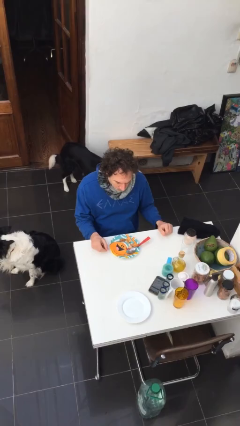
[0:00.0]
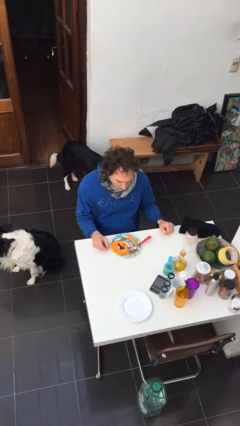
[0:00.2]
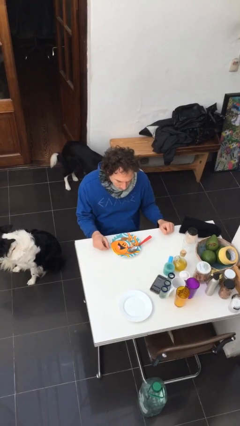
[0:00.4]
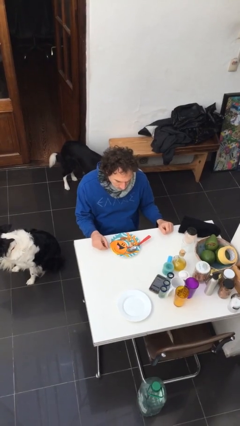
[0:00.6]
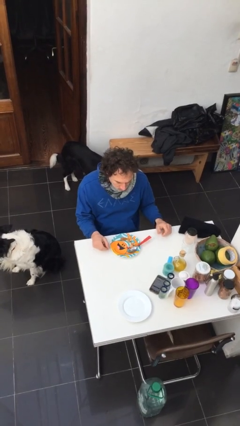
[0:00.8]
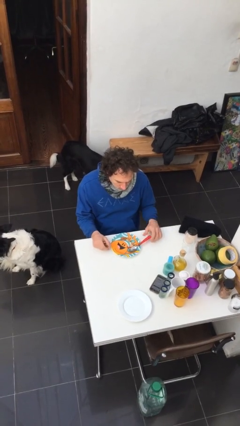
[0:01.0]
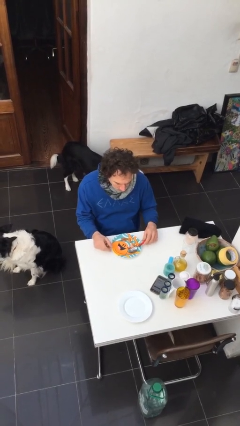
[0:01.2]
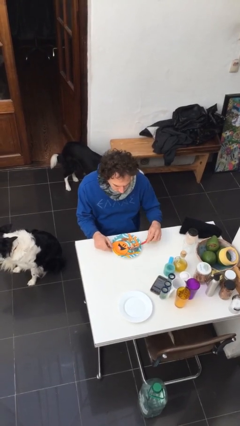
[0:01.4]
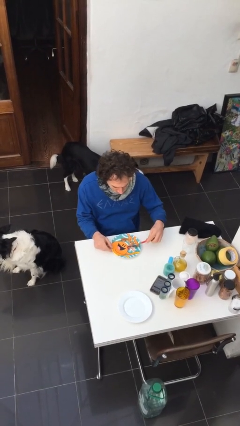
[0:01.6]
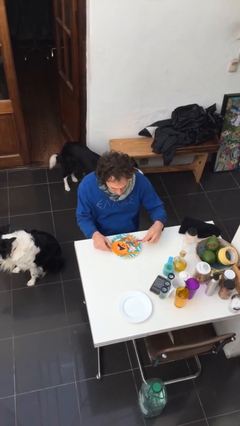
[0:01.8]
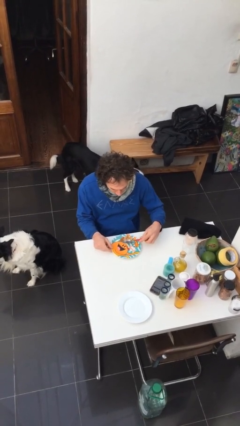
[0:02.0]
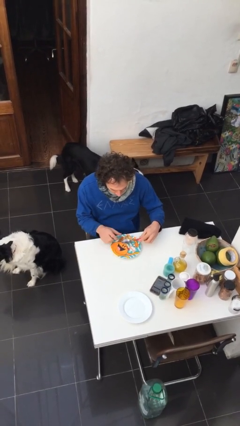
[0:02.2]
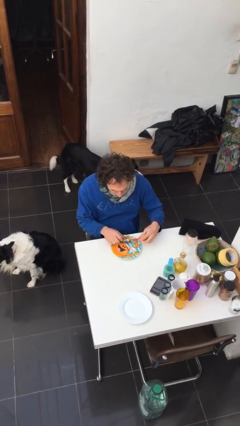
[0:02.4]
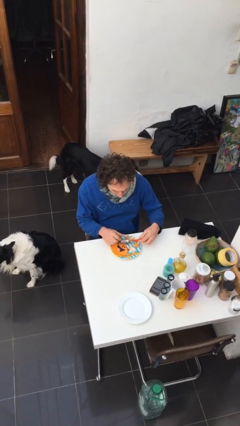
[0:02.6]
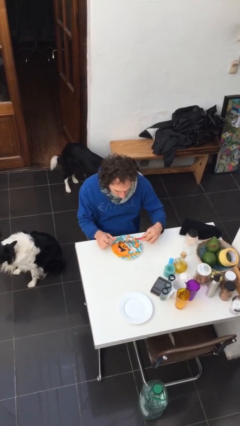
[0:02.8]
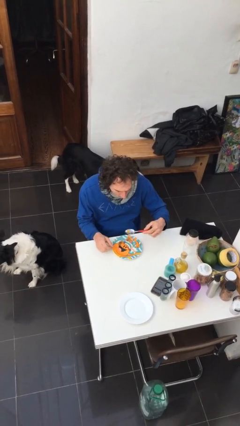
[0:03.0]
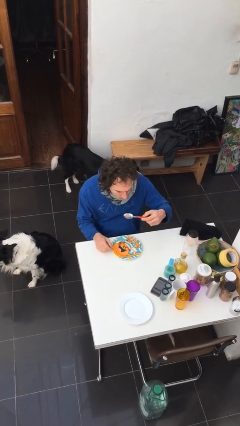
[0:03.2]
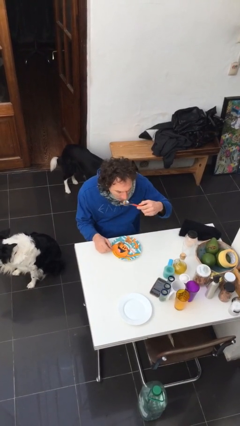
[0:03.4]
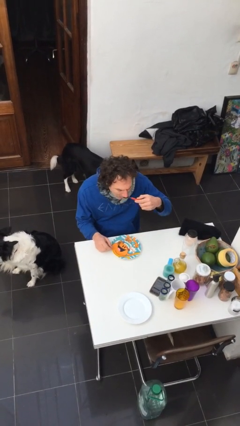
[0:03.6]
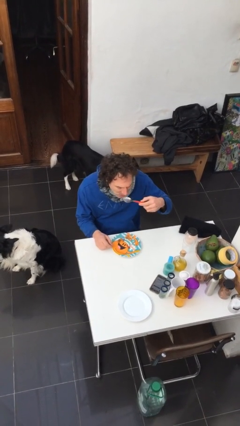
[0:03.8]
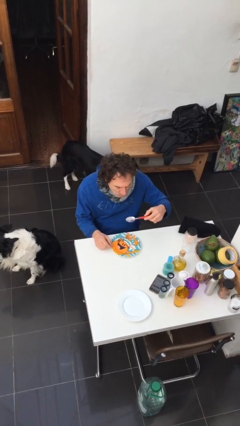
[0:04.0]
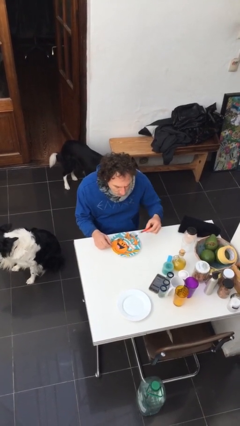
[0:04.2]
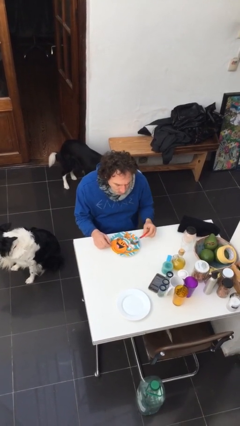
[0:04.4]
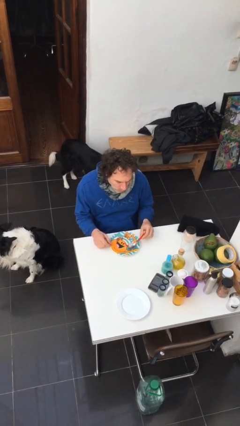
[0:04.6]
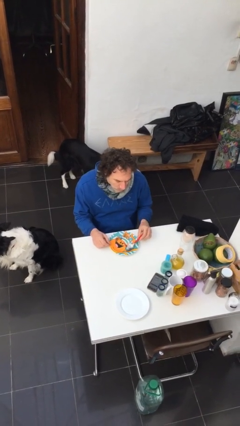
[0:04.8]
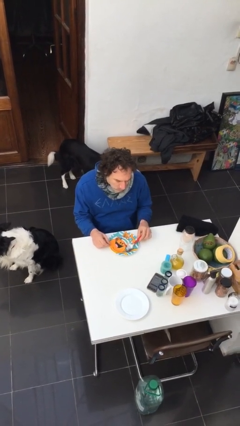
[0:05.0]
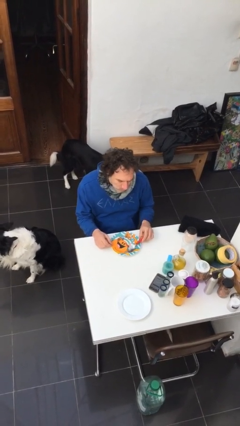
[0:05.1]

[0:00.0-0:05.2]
person eats with utensil

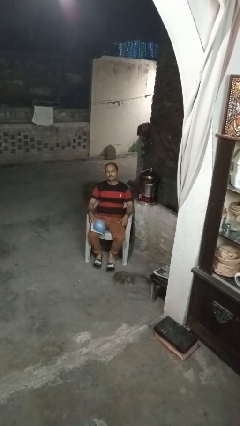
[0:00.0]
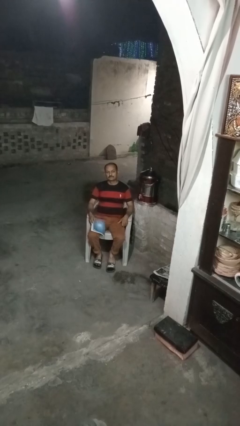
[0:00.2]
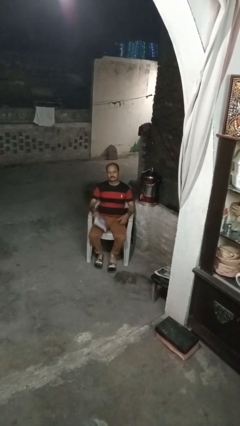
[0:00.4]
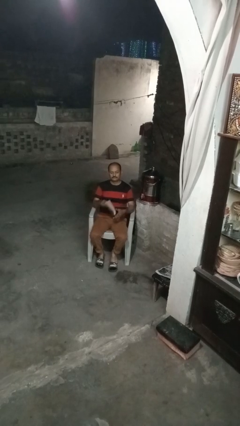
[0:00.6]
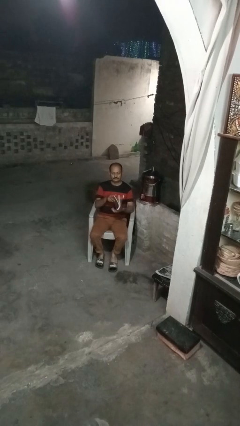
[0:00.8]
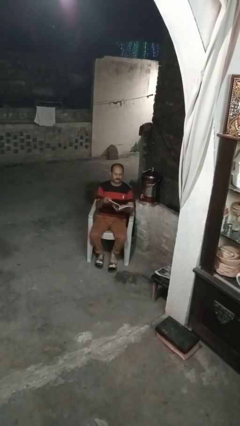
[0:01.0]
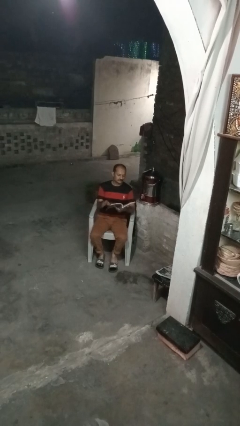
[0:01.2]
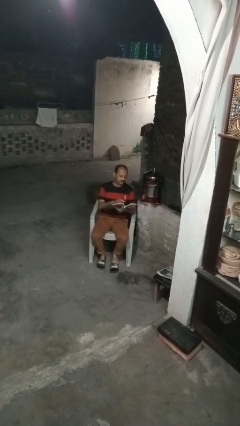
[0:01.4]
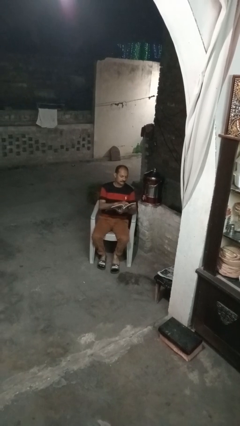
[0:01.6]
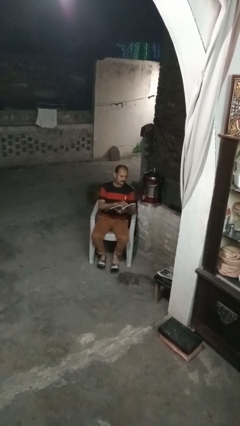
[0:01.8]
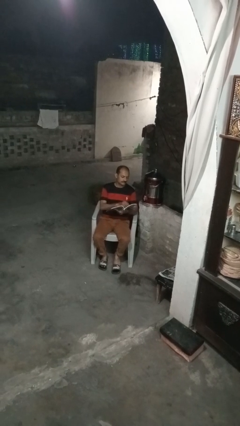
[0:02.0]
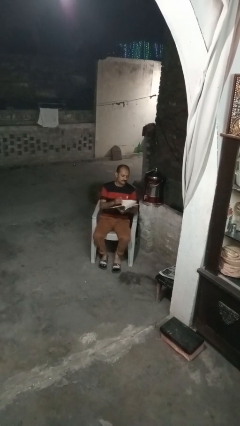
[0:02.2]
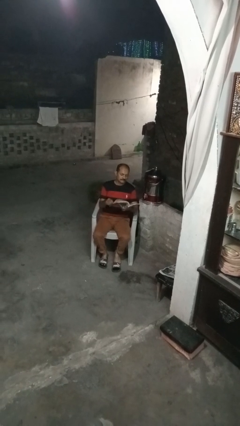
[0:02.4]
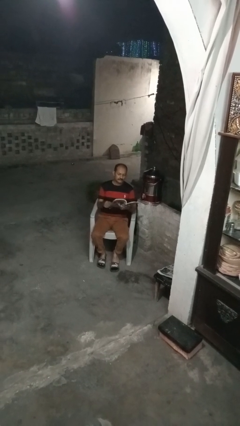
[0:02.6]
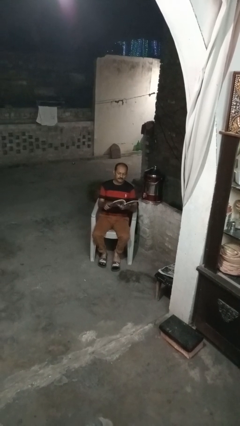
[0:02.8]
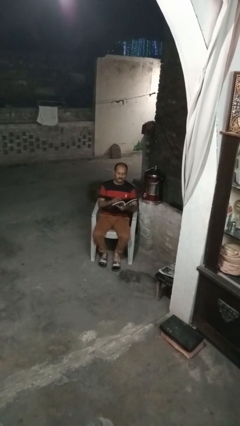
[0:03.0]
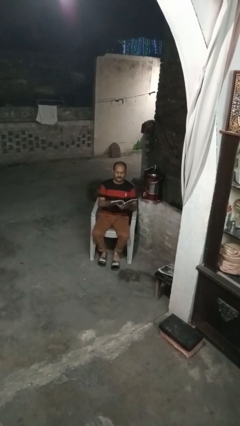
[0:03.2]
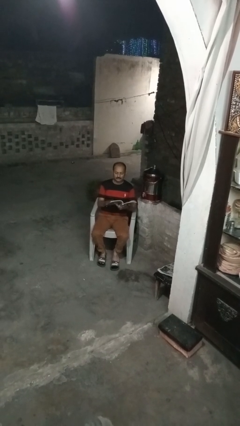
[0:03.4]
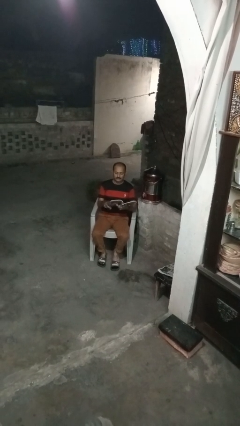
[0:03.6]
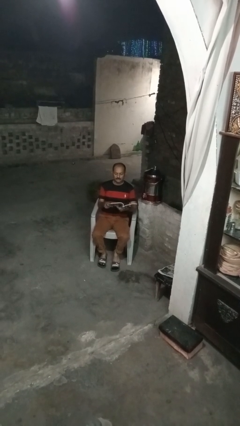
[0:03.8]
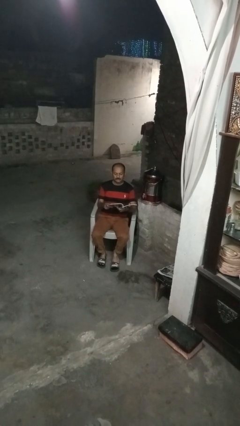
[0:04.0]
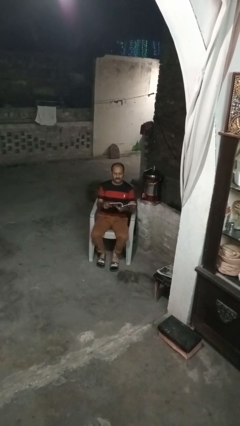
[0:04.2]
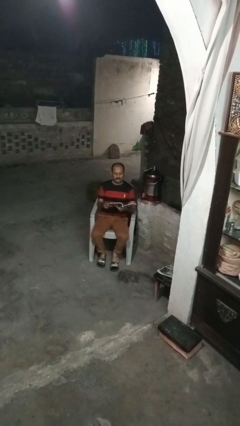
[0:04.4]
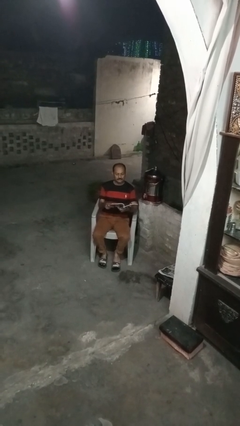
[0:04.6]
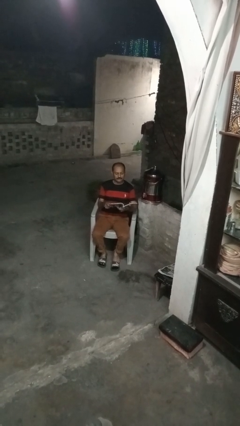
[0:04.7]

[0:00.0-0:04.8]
person reads book

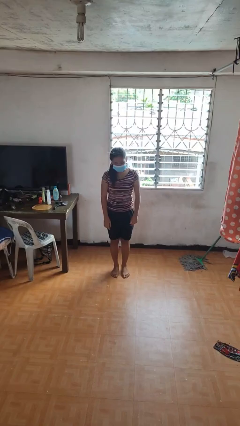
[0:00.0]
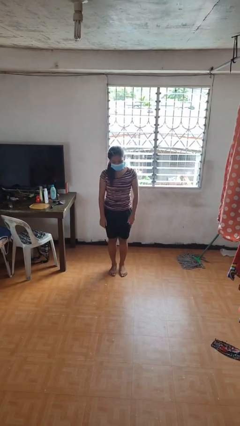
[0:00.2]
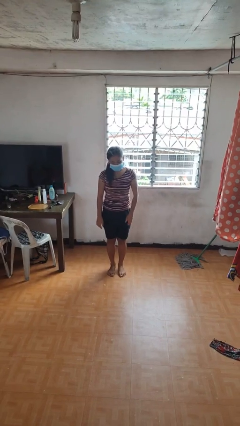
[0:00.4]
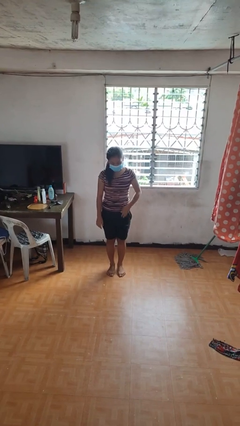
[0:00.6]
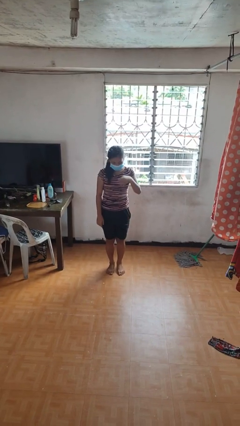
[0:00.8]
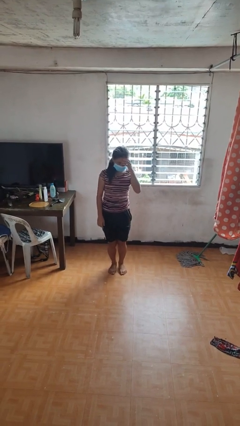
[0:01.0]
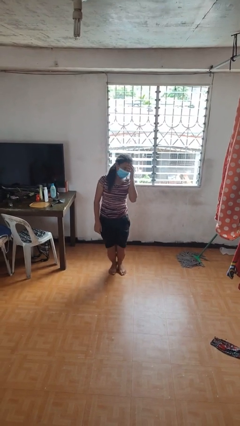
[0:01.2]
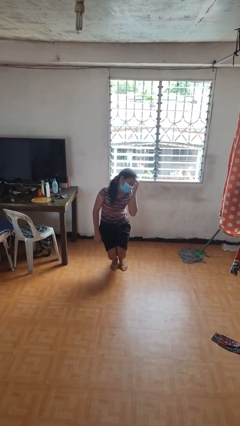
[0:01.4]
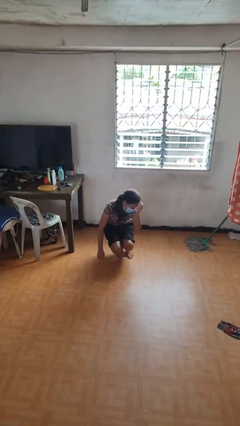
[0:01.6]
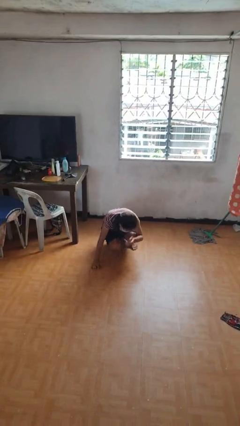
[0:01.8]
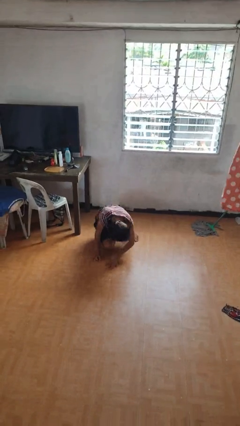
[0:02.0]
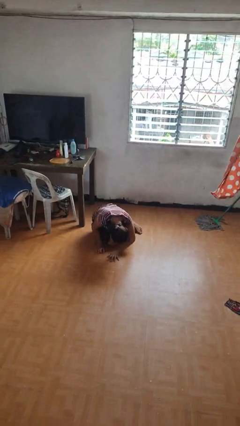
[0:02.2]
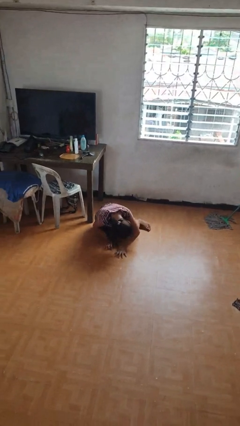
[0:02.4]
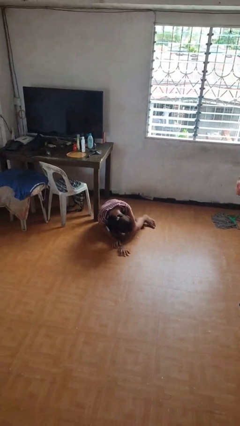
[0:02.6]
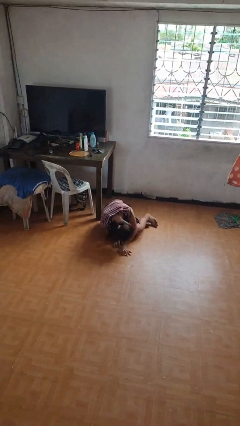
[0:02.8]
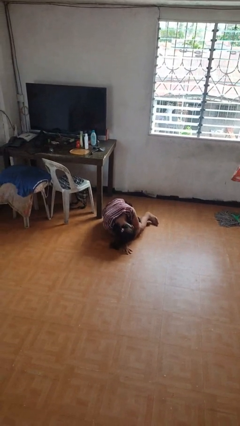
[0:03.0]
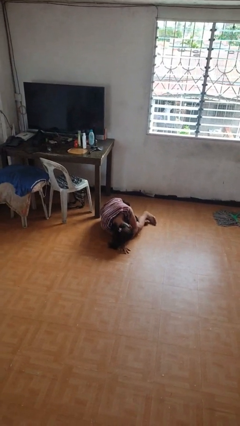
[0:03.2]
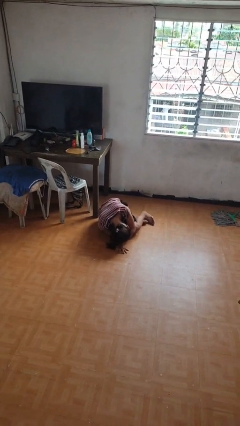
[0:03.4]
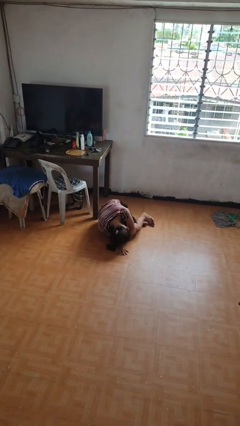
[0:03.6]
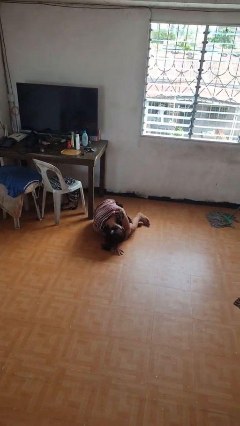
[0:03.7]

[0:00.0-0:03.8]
person falls while standing

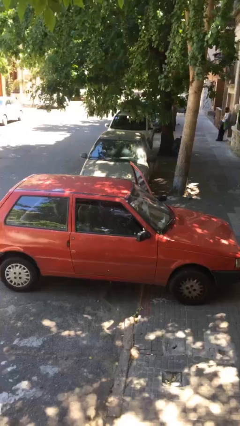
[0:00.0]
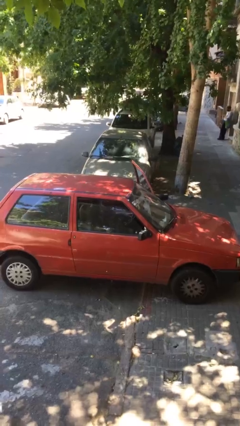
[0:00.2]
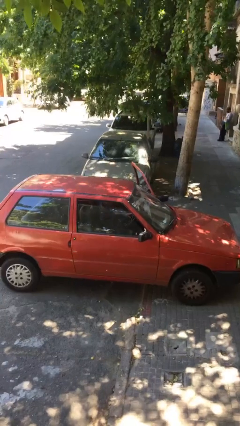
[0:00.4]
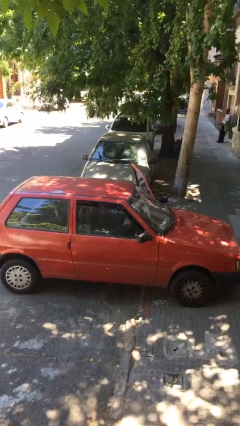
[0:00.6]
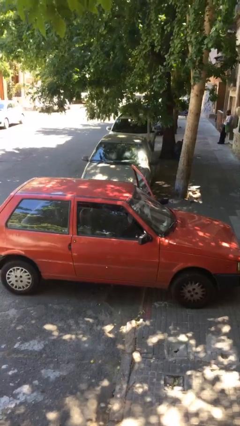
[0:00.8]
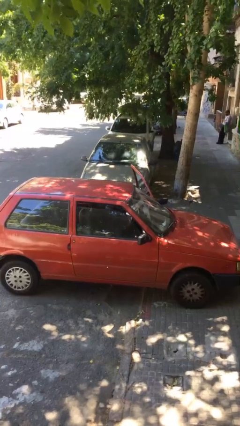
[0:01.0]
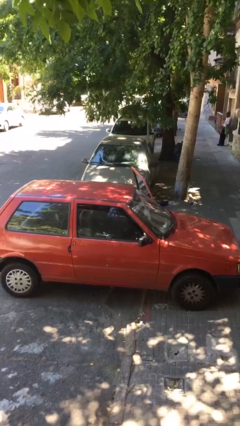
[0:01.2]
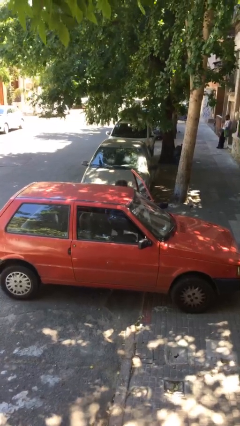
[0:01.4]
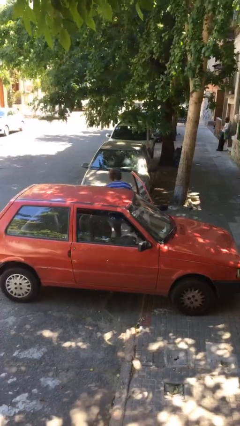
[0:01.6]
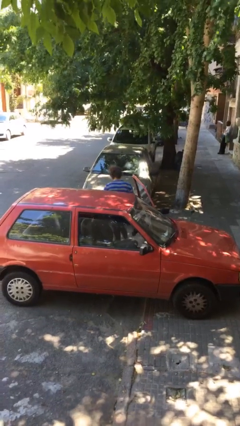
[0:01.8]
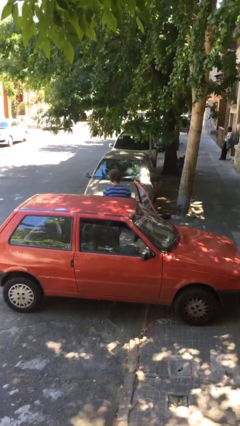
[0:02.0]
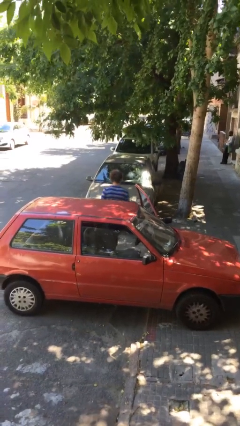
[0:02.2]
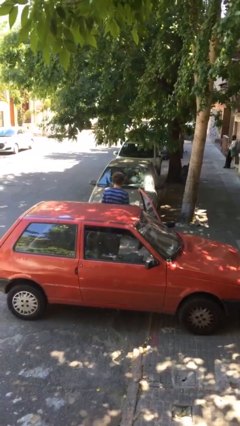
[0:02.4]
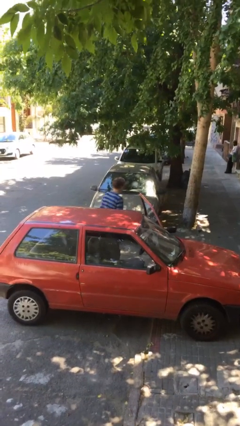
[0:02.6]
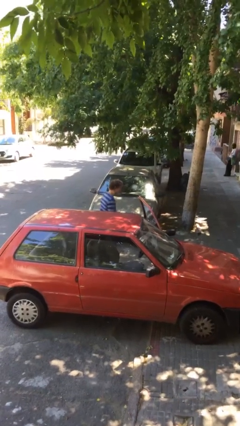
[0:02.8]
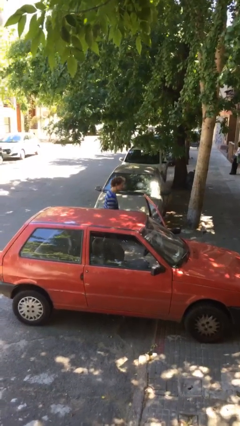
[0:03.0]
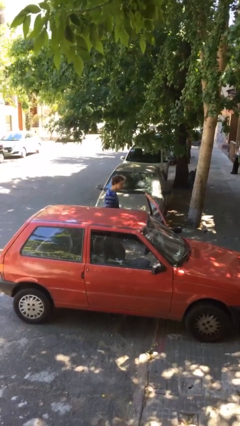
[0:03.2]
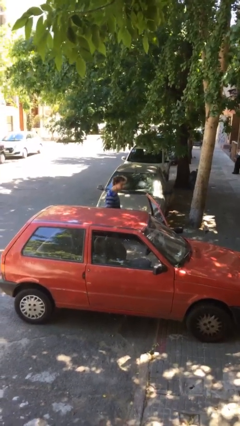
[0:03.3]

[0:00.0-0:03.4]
person exits car

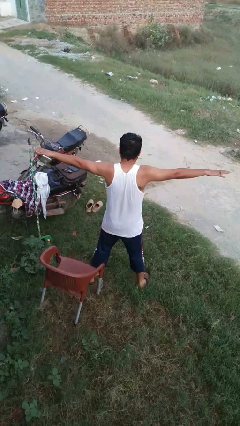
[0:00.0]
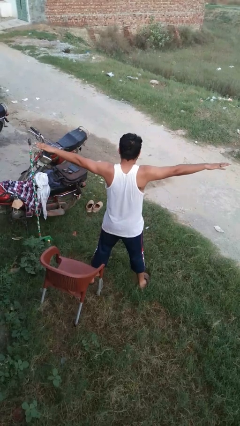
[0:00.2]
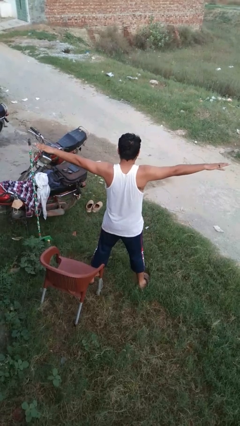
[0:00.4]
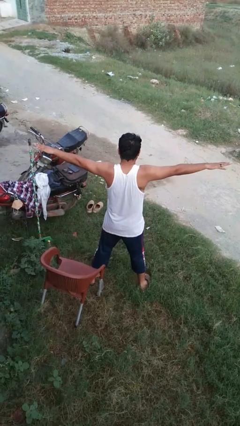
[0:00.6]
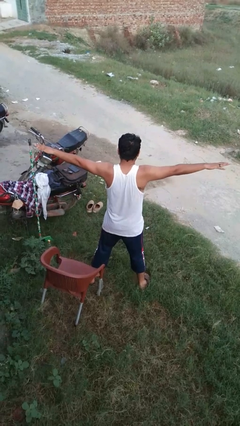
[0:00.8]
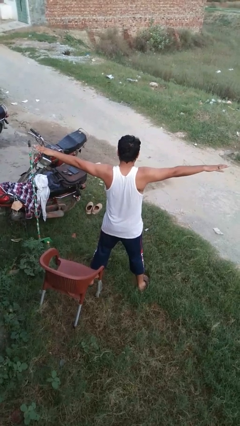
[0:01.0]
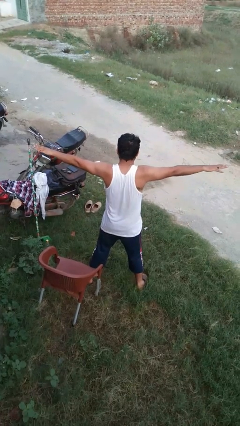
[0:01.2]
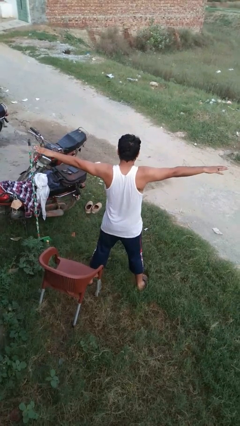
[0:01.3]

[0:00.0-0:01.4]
person stretches arms to side
